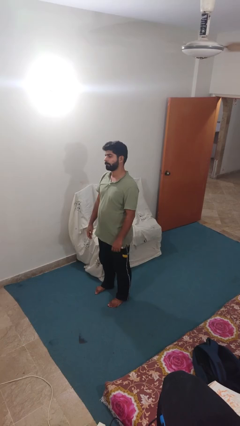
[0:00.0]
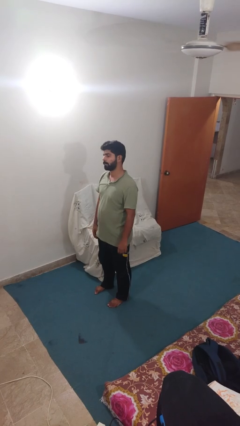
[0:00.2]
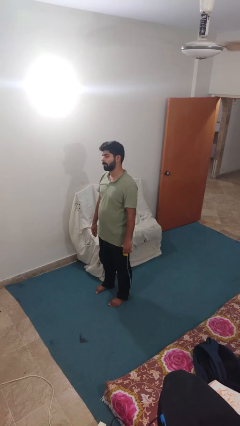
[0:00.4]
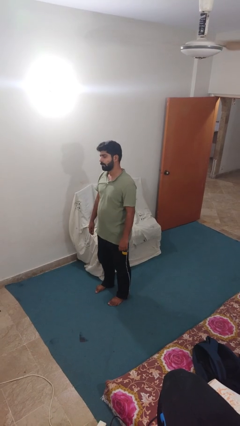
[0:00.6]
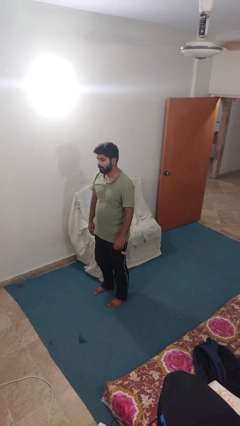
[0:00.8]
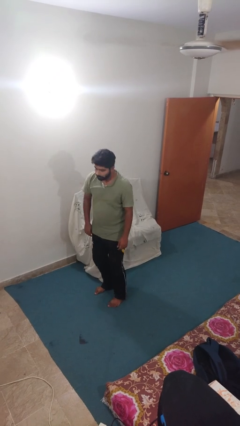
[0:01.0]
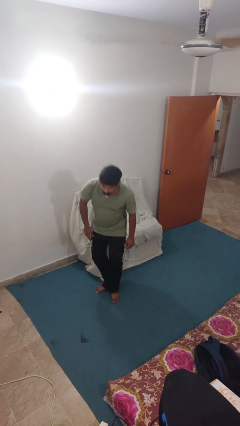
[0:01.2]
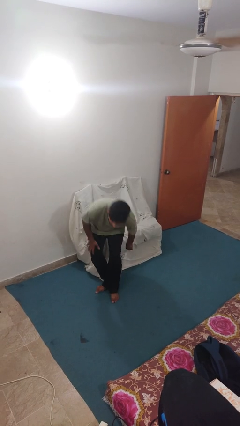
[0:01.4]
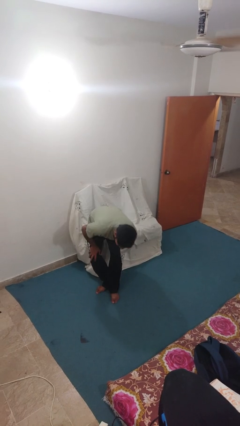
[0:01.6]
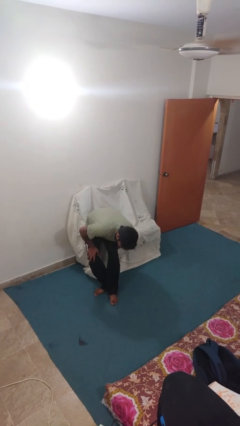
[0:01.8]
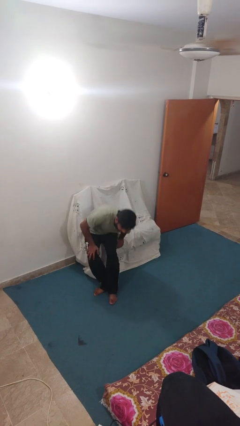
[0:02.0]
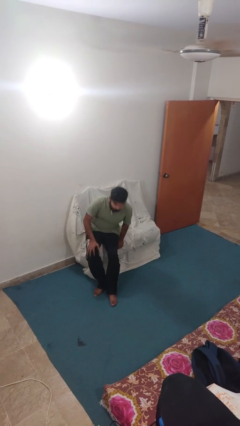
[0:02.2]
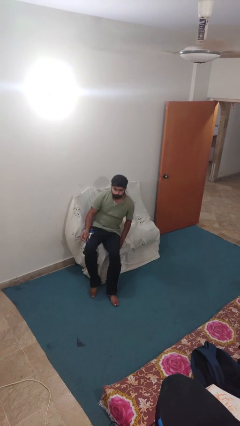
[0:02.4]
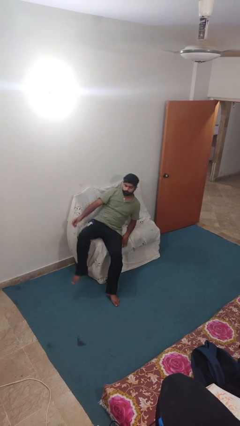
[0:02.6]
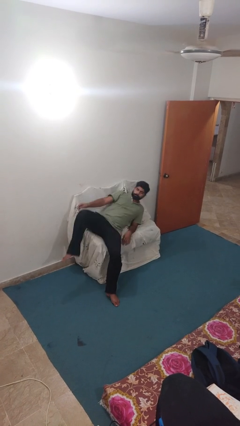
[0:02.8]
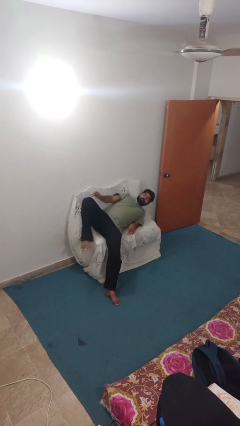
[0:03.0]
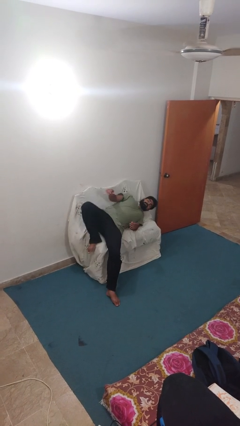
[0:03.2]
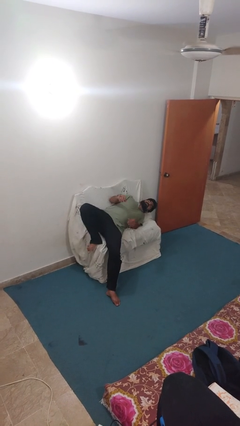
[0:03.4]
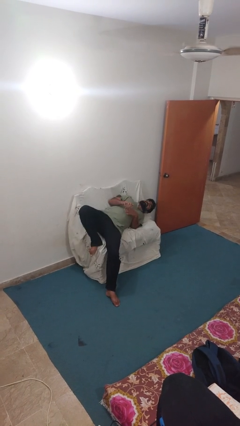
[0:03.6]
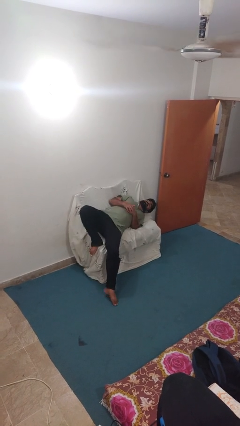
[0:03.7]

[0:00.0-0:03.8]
person lies down on couch

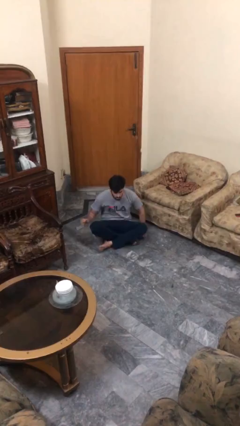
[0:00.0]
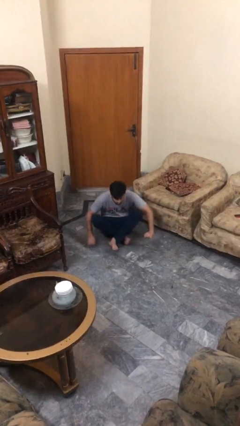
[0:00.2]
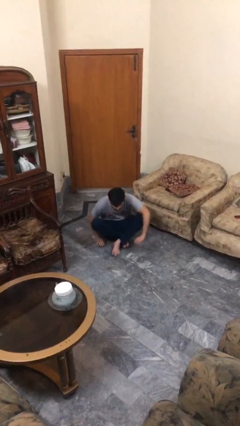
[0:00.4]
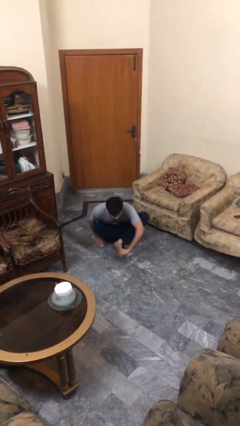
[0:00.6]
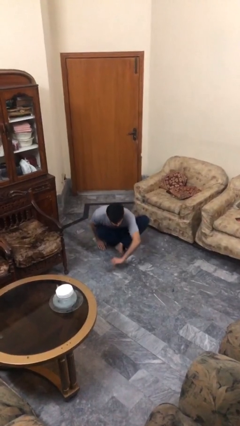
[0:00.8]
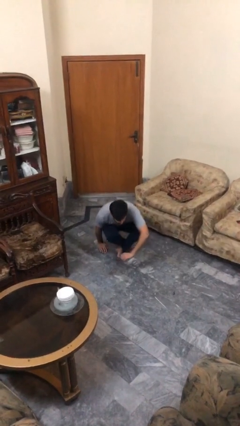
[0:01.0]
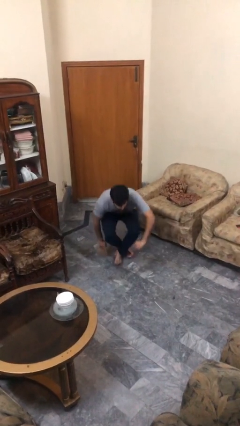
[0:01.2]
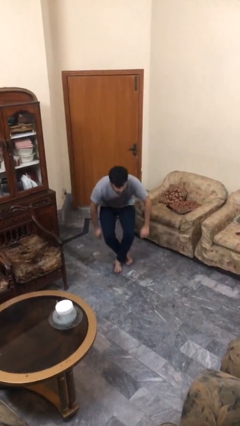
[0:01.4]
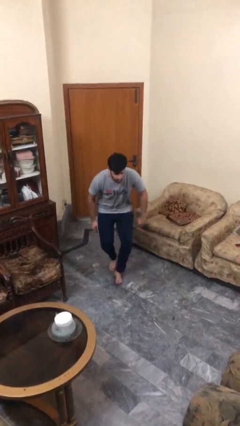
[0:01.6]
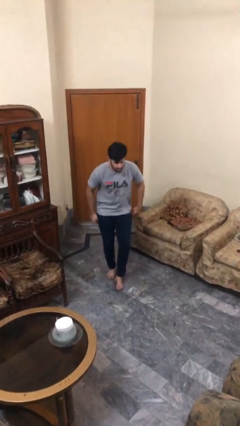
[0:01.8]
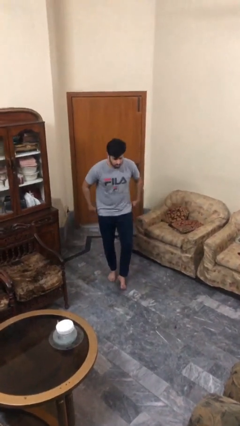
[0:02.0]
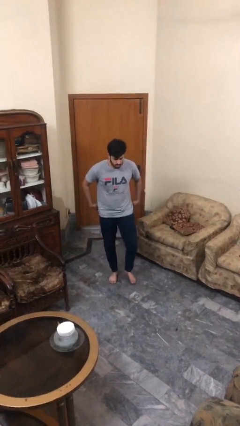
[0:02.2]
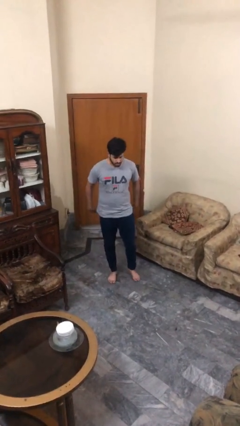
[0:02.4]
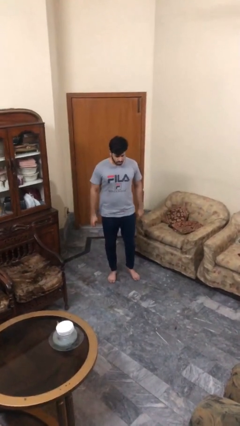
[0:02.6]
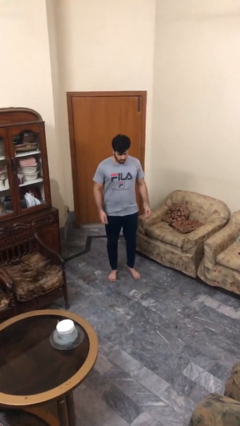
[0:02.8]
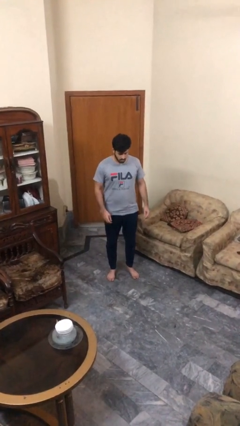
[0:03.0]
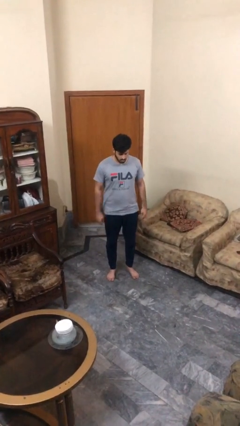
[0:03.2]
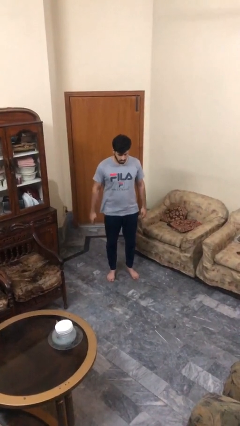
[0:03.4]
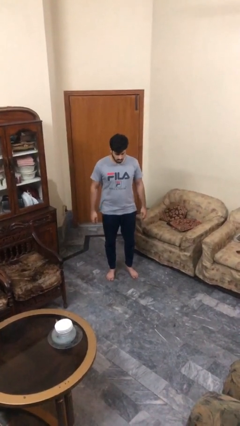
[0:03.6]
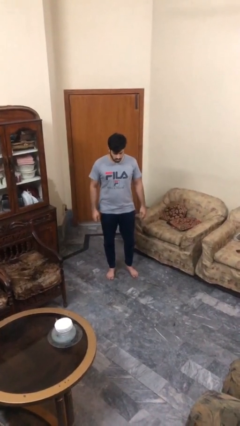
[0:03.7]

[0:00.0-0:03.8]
person stands up from floor

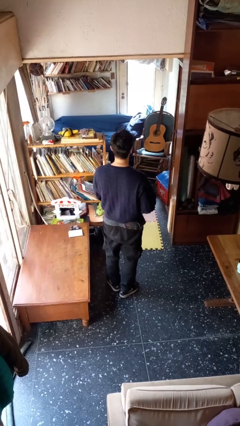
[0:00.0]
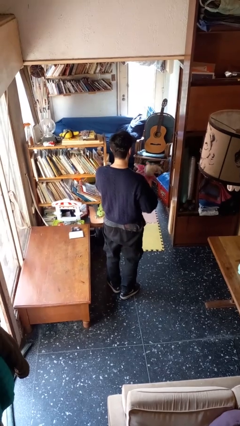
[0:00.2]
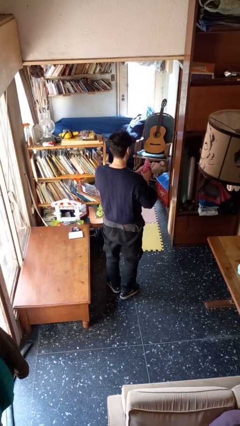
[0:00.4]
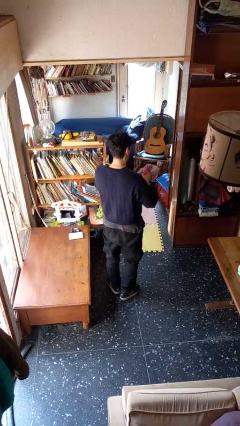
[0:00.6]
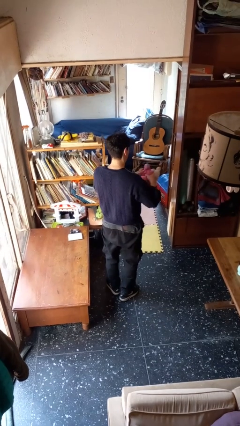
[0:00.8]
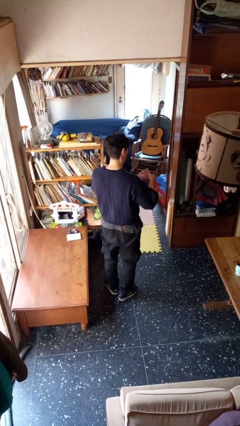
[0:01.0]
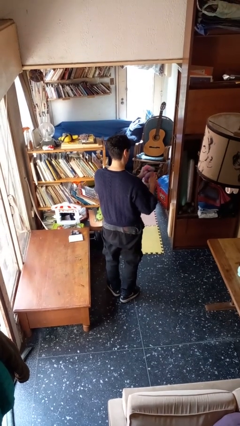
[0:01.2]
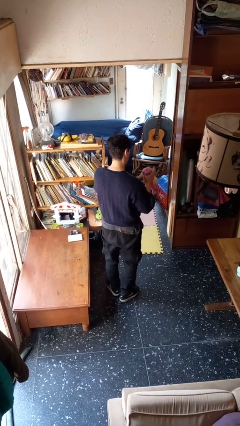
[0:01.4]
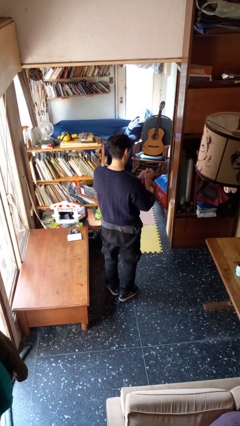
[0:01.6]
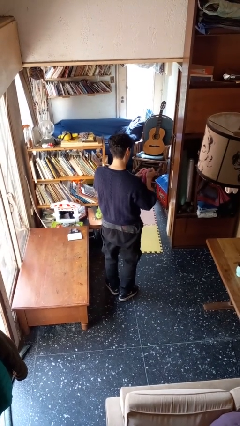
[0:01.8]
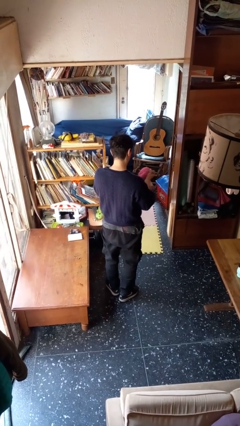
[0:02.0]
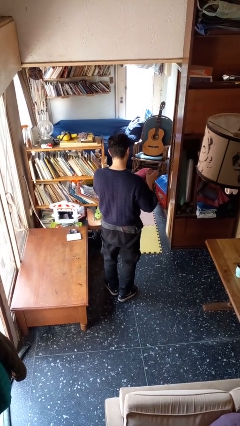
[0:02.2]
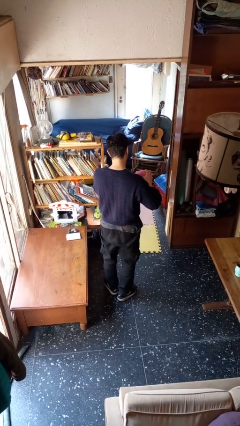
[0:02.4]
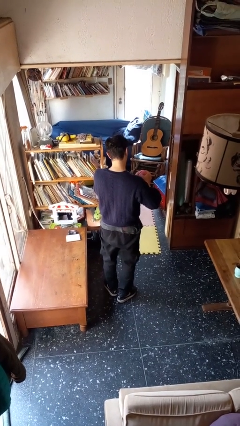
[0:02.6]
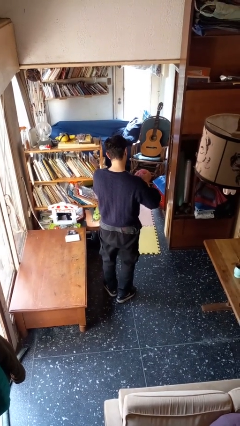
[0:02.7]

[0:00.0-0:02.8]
person squeezes object

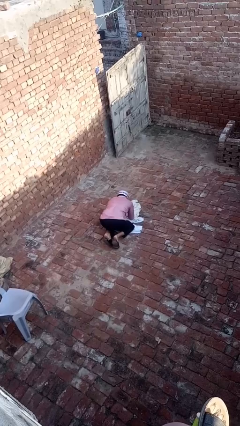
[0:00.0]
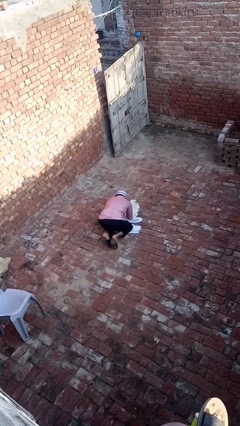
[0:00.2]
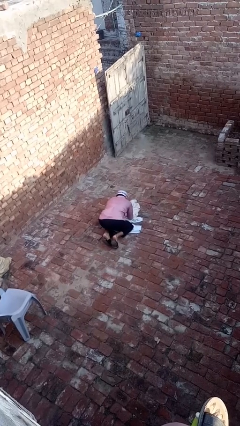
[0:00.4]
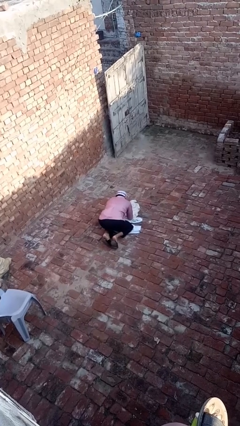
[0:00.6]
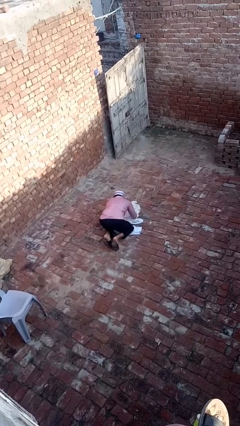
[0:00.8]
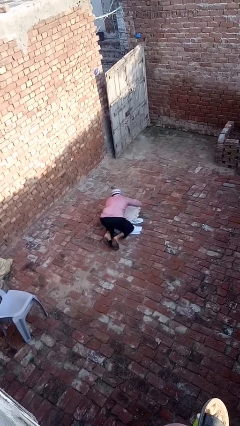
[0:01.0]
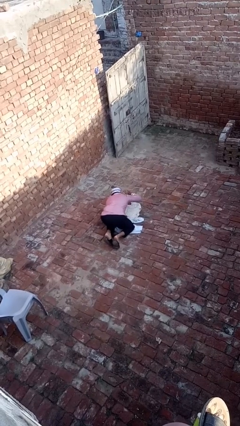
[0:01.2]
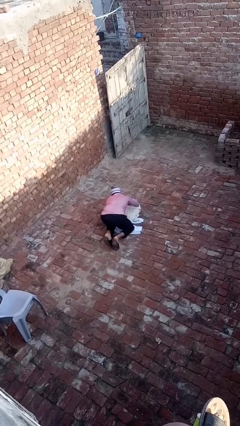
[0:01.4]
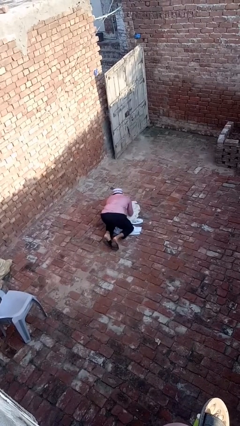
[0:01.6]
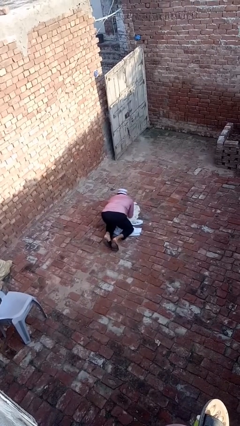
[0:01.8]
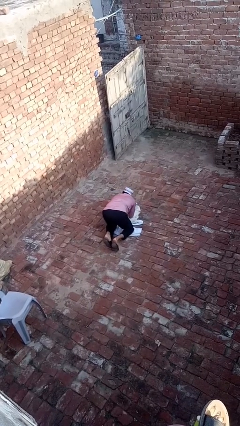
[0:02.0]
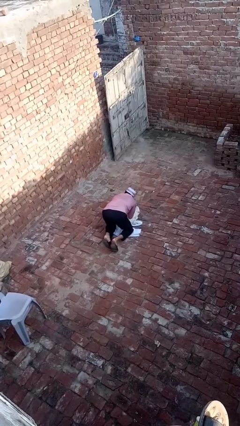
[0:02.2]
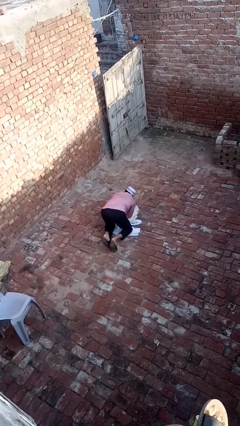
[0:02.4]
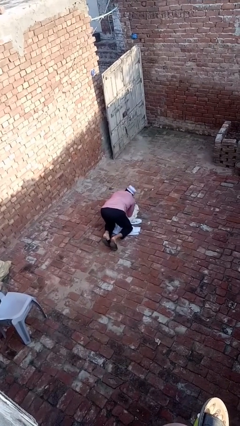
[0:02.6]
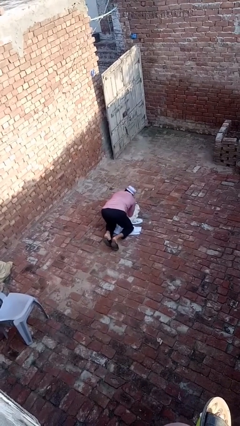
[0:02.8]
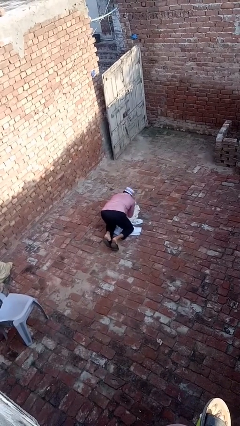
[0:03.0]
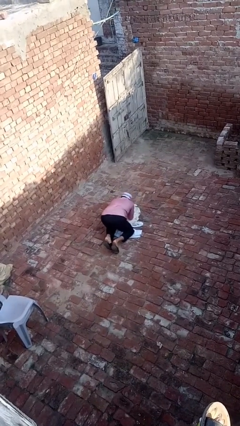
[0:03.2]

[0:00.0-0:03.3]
person crawls

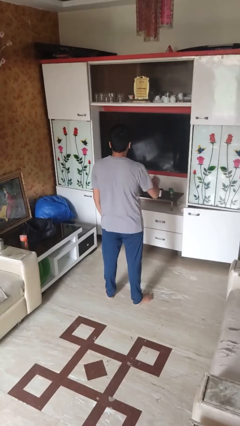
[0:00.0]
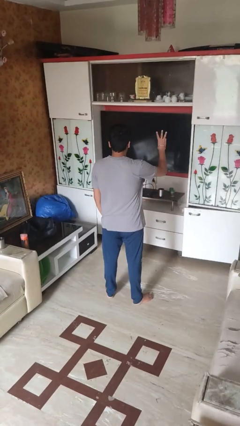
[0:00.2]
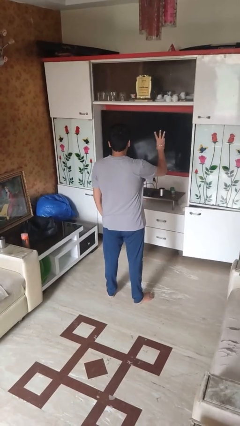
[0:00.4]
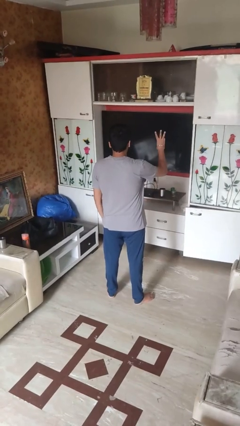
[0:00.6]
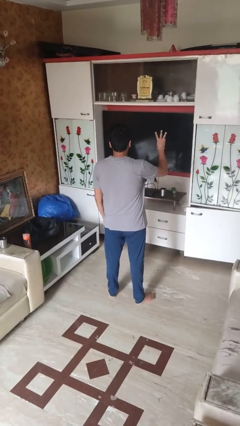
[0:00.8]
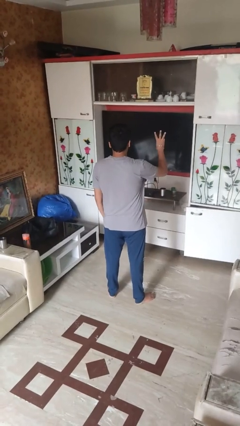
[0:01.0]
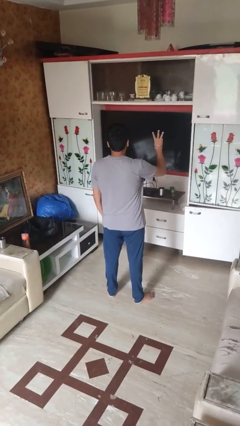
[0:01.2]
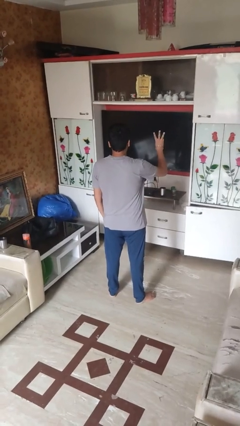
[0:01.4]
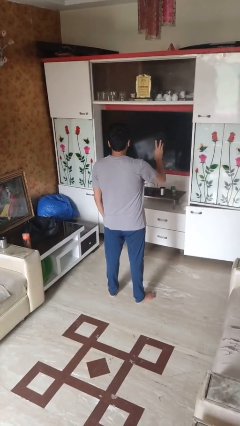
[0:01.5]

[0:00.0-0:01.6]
person gestures number three

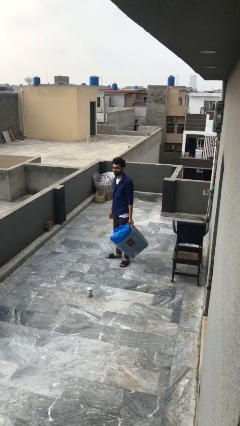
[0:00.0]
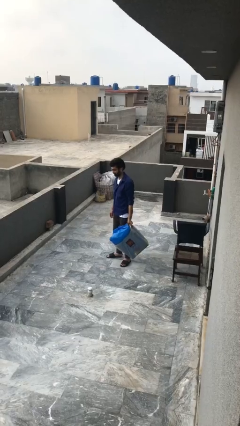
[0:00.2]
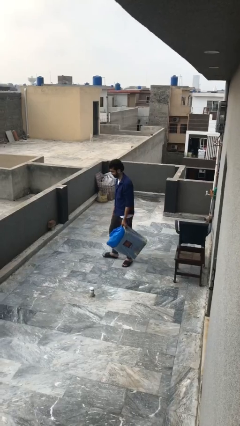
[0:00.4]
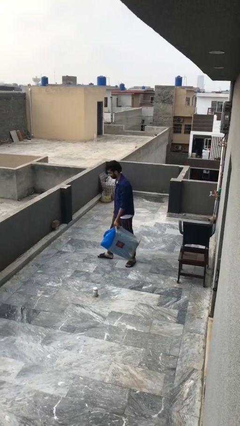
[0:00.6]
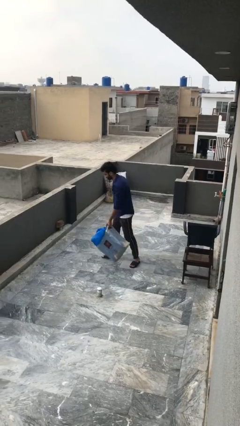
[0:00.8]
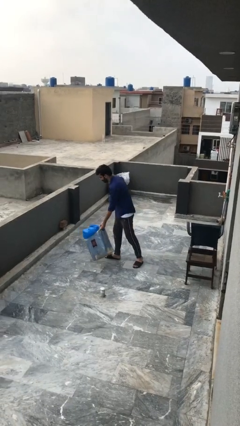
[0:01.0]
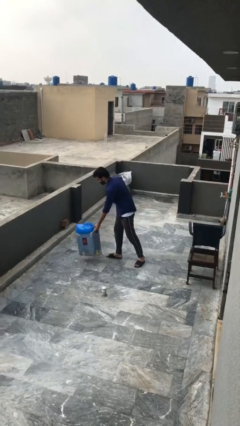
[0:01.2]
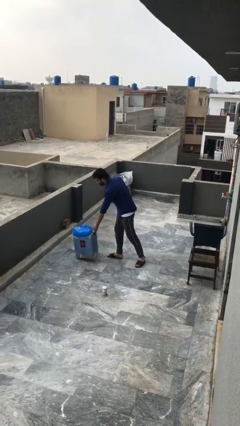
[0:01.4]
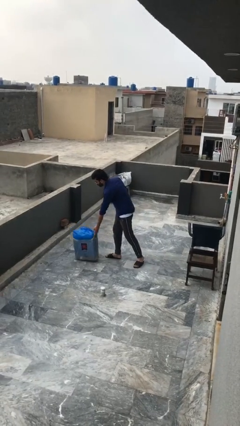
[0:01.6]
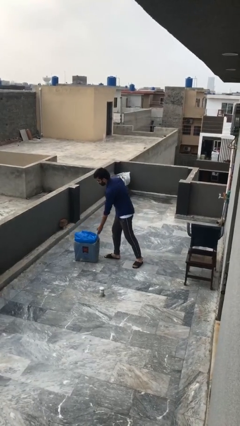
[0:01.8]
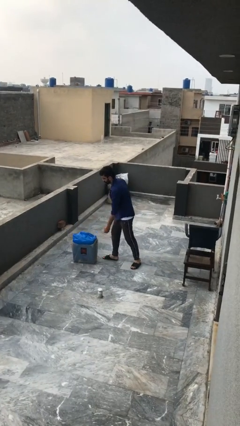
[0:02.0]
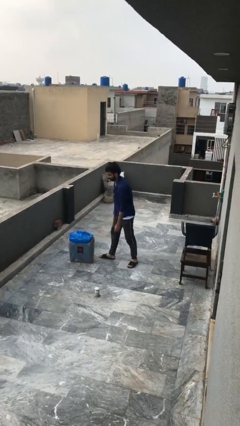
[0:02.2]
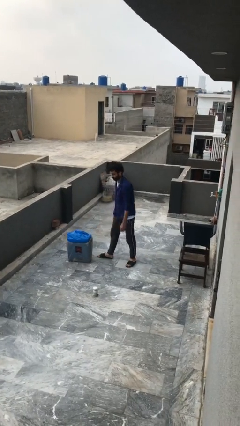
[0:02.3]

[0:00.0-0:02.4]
person puts down object on floor
